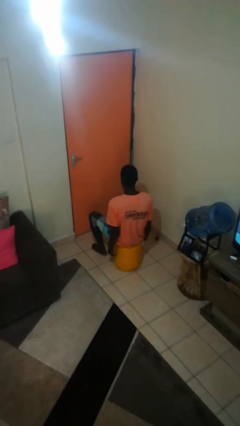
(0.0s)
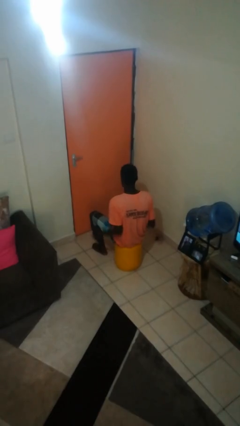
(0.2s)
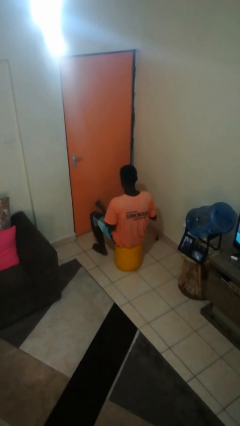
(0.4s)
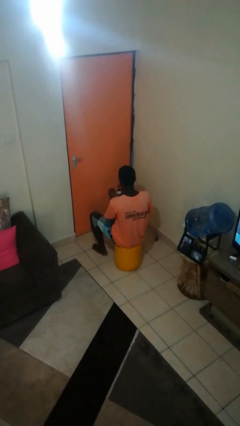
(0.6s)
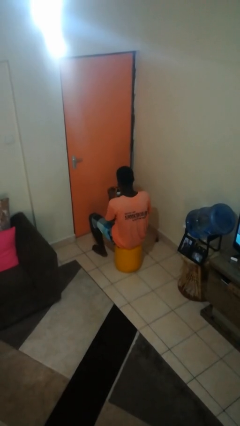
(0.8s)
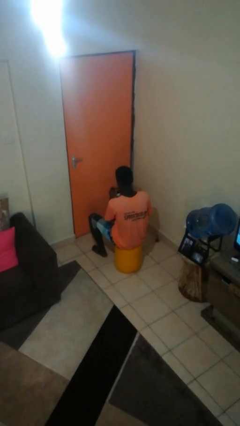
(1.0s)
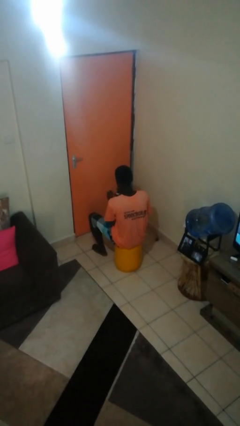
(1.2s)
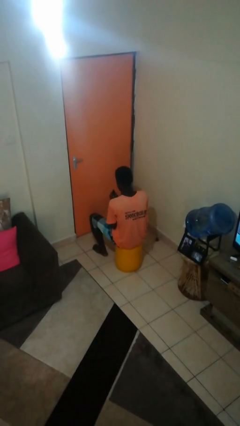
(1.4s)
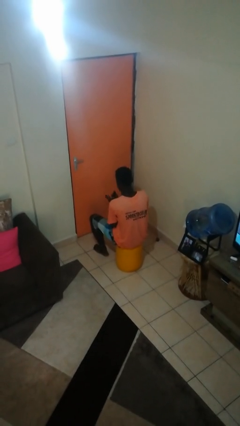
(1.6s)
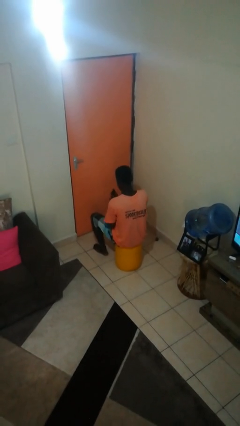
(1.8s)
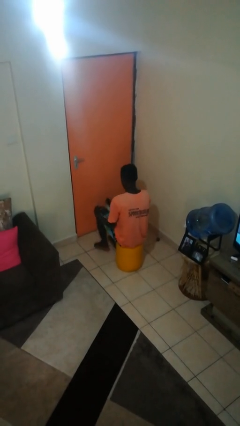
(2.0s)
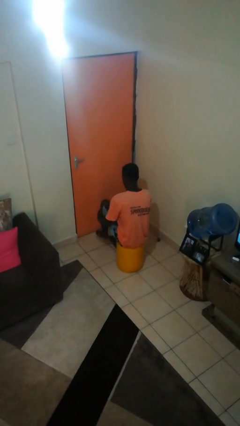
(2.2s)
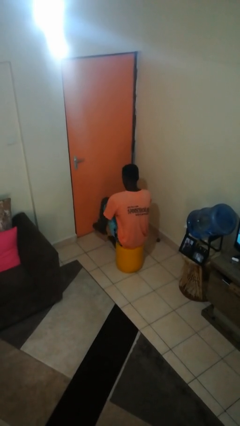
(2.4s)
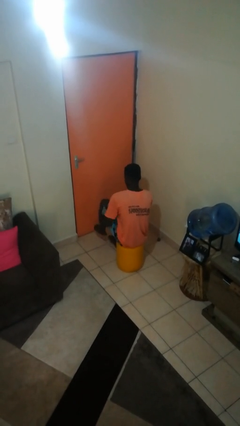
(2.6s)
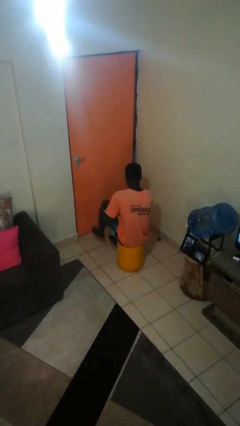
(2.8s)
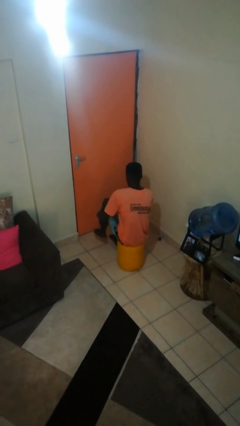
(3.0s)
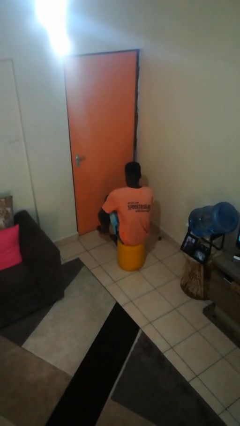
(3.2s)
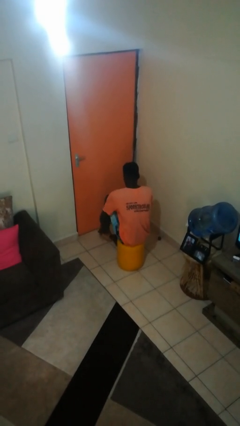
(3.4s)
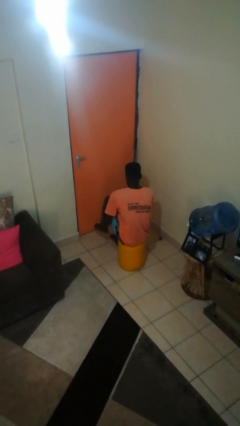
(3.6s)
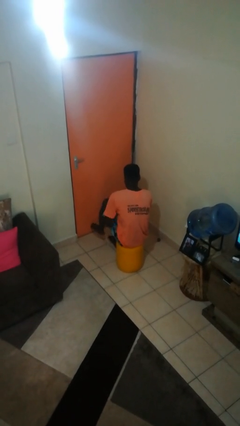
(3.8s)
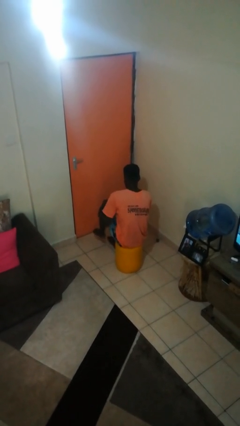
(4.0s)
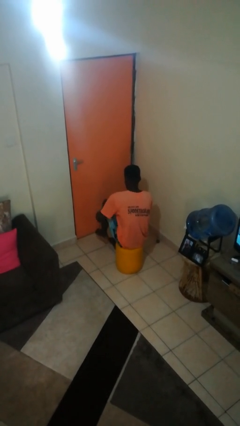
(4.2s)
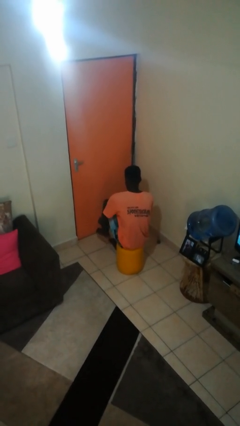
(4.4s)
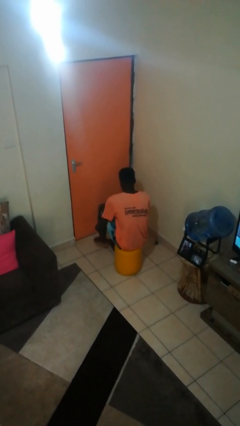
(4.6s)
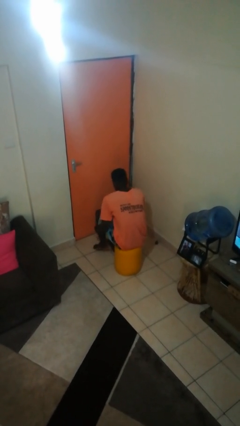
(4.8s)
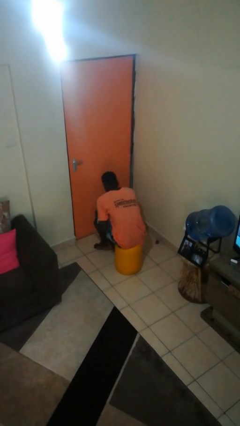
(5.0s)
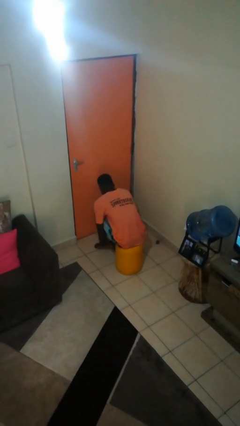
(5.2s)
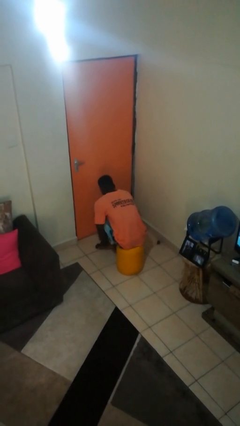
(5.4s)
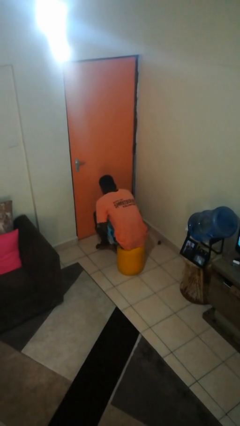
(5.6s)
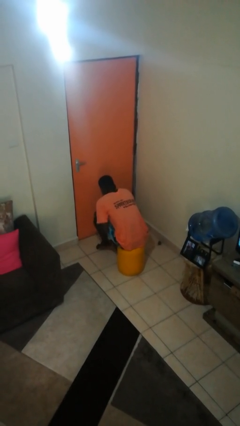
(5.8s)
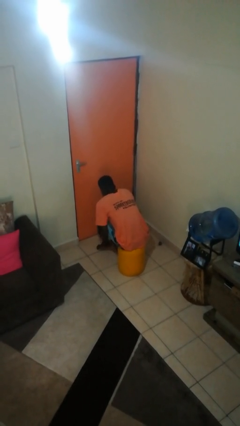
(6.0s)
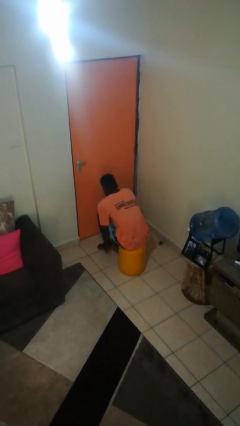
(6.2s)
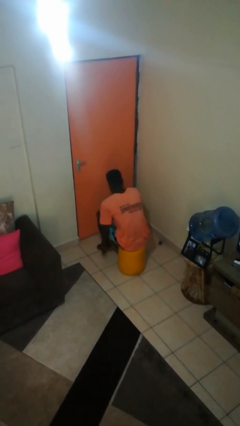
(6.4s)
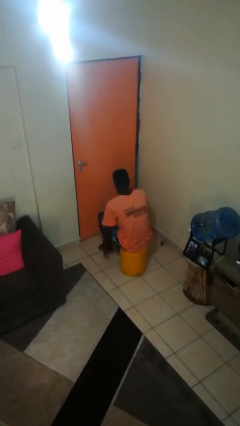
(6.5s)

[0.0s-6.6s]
person applies sunscreen

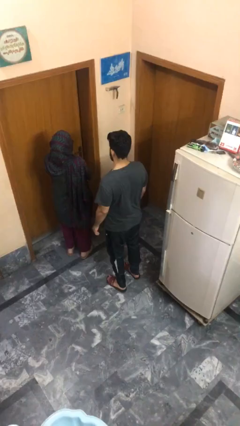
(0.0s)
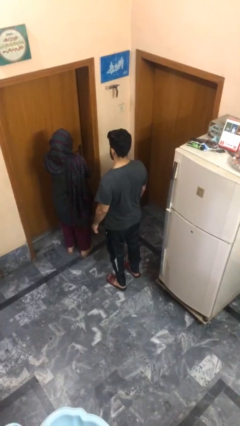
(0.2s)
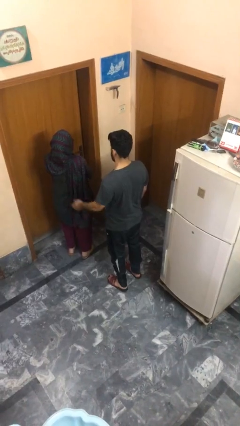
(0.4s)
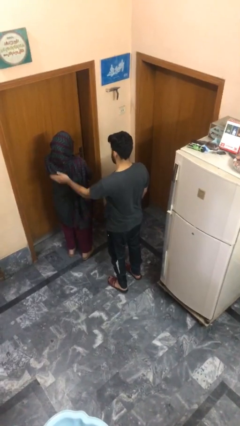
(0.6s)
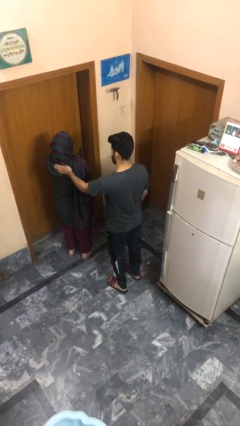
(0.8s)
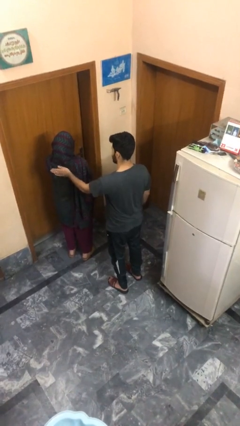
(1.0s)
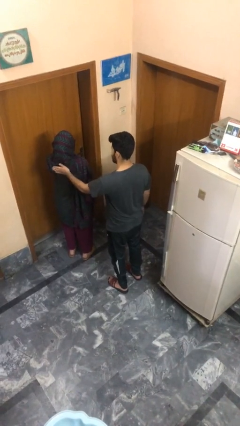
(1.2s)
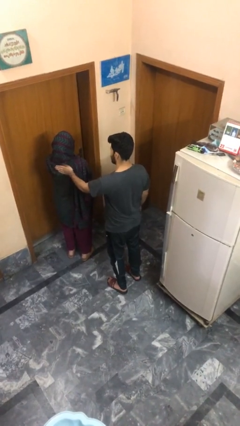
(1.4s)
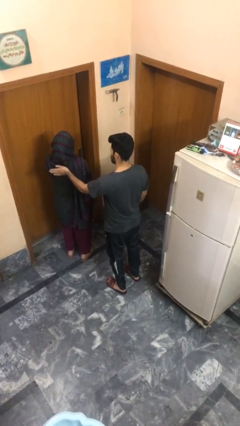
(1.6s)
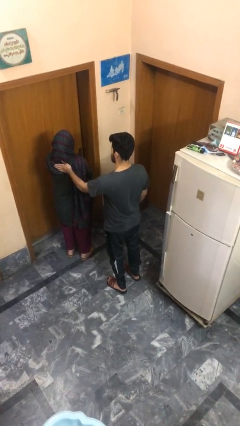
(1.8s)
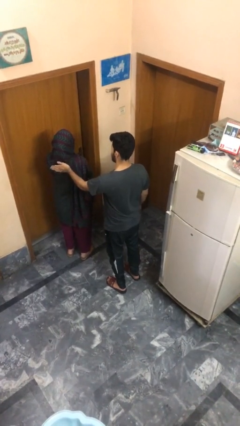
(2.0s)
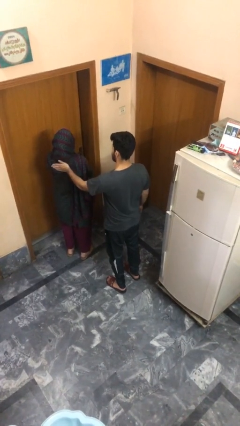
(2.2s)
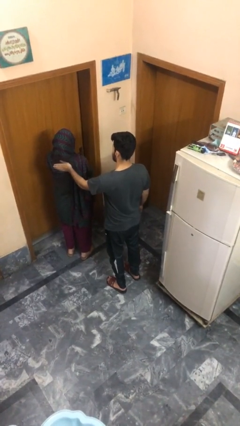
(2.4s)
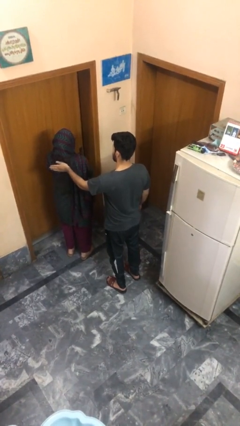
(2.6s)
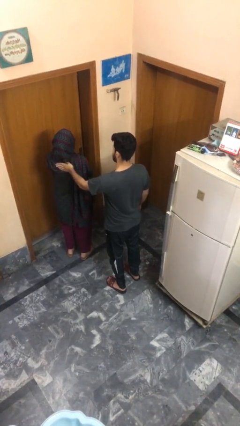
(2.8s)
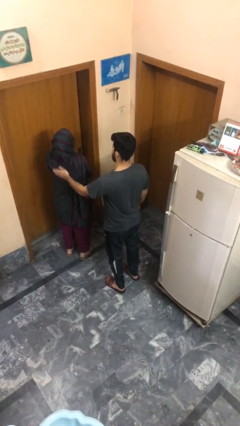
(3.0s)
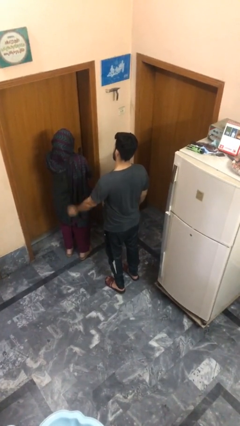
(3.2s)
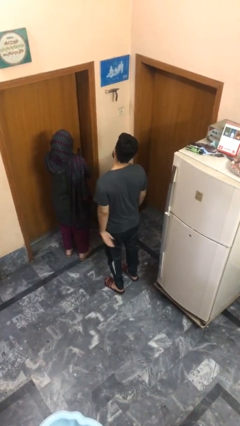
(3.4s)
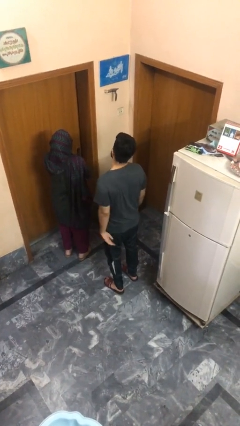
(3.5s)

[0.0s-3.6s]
person touches back of person

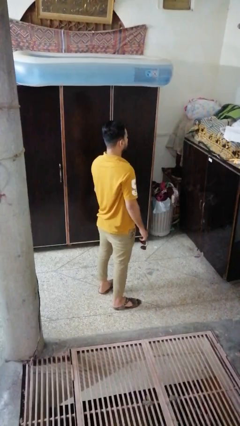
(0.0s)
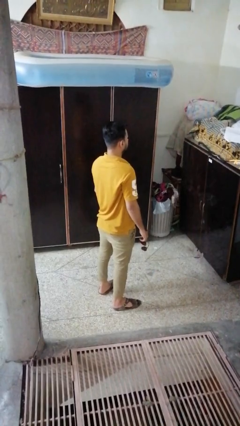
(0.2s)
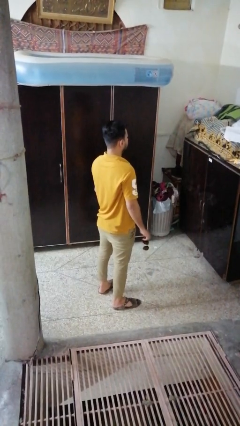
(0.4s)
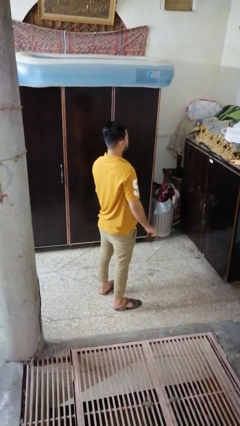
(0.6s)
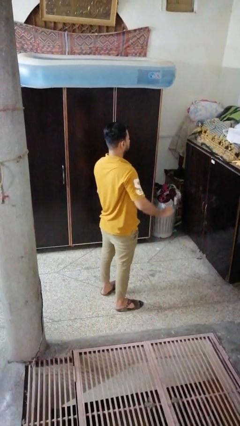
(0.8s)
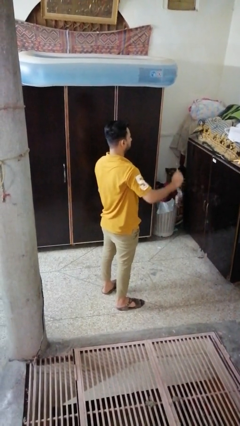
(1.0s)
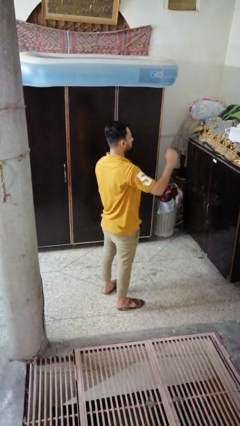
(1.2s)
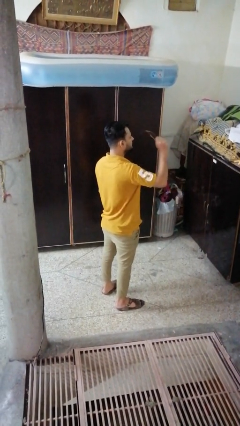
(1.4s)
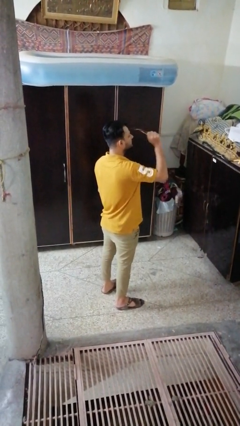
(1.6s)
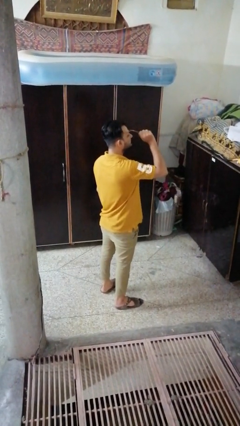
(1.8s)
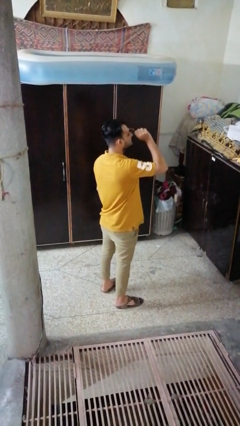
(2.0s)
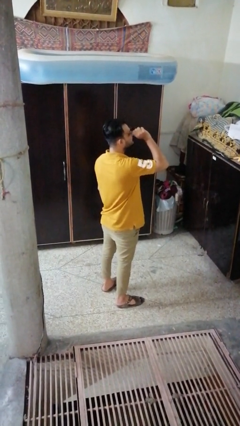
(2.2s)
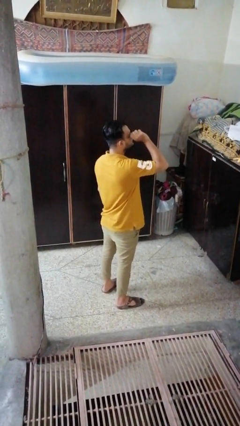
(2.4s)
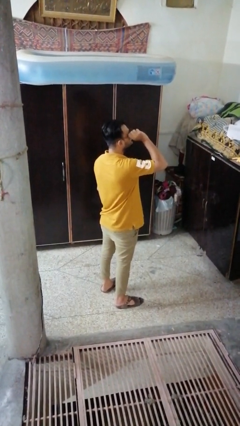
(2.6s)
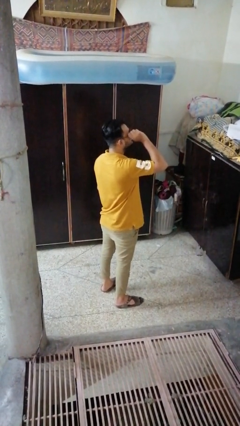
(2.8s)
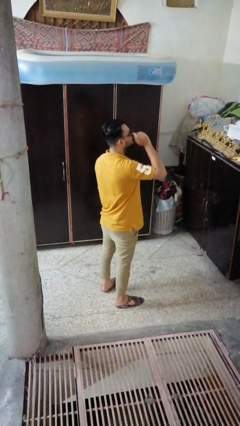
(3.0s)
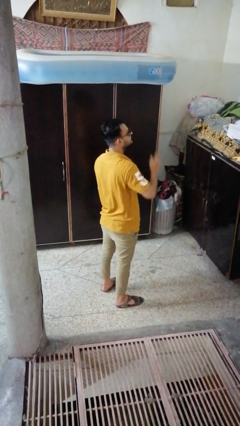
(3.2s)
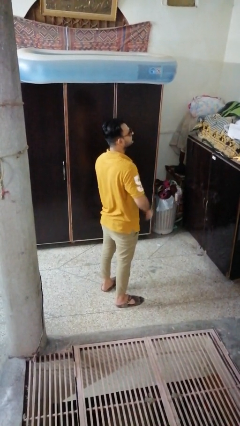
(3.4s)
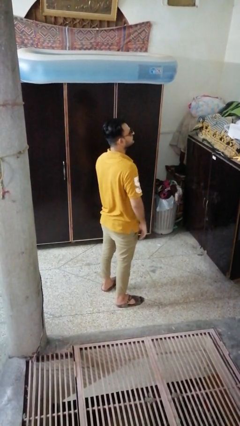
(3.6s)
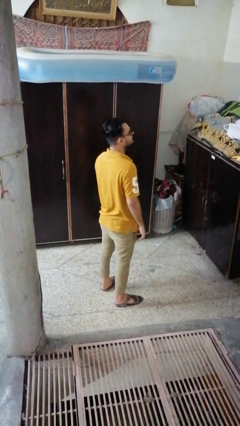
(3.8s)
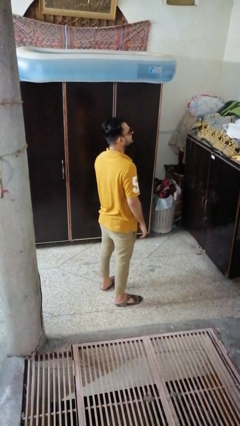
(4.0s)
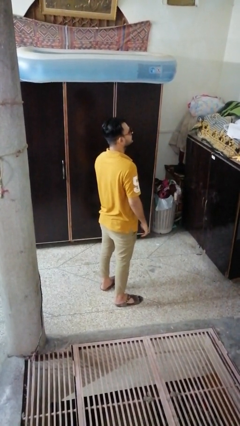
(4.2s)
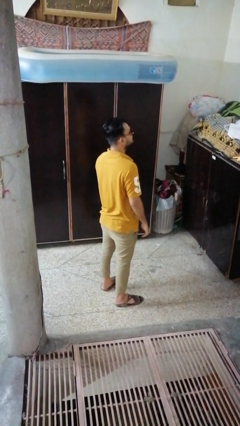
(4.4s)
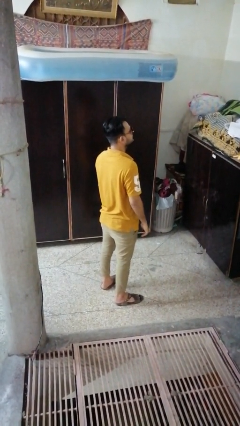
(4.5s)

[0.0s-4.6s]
person puts on sunglasses

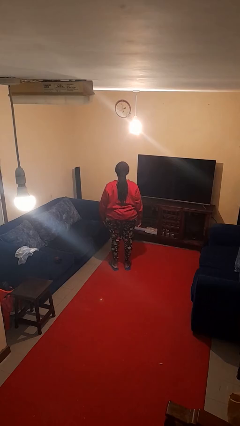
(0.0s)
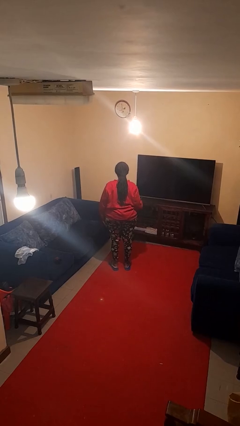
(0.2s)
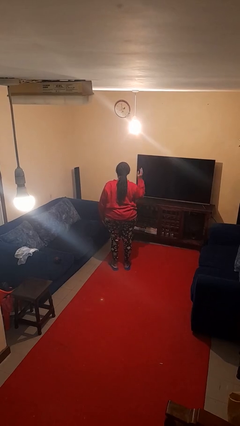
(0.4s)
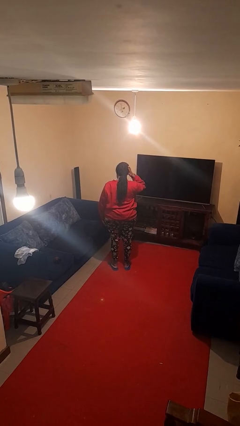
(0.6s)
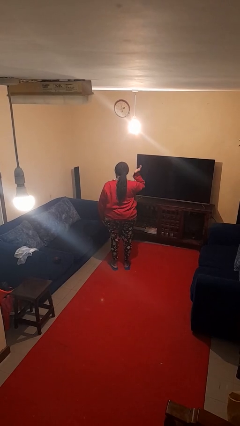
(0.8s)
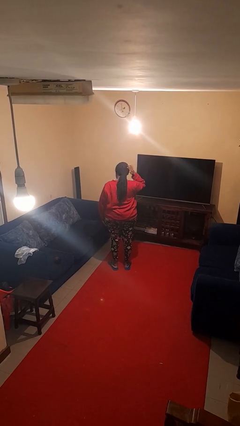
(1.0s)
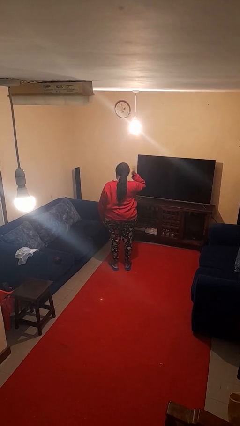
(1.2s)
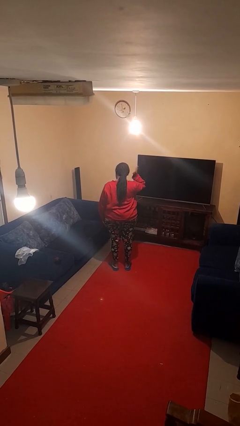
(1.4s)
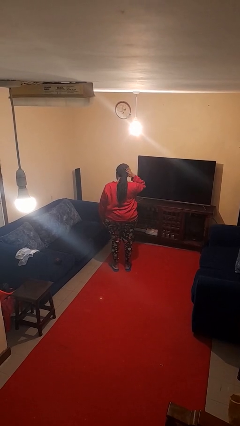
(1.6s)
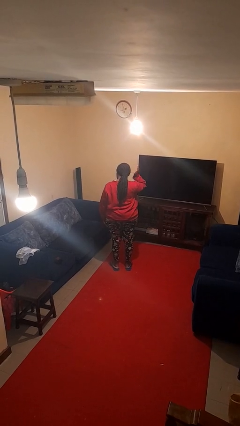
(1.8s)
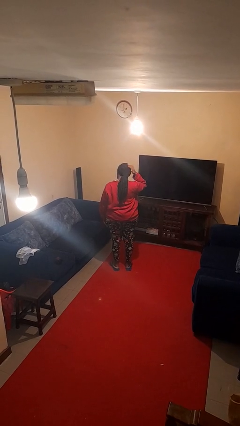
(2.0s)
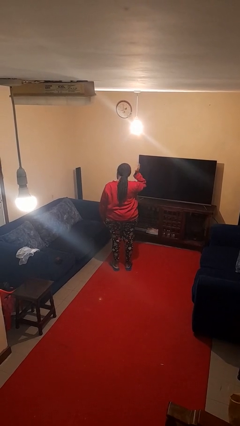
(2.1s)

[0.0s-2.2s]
person pats head

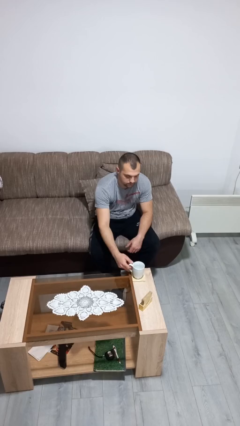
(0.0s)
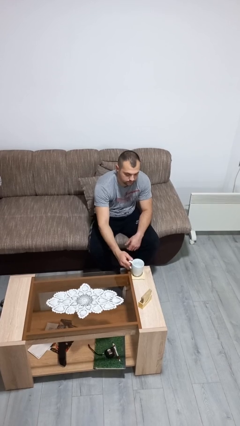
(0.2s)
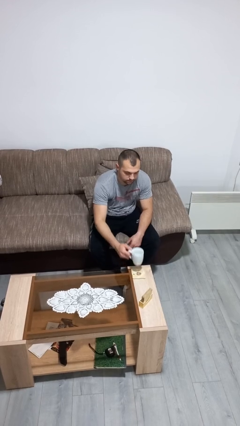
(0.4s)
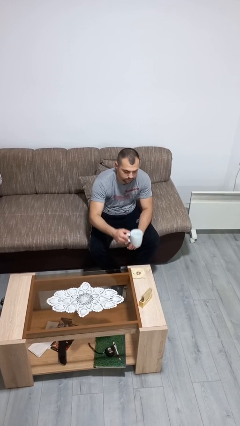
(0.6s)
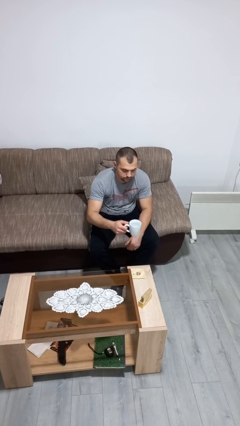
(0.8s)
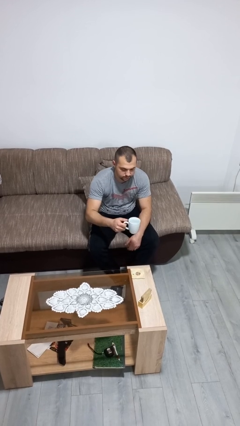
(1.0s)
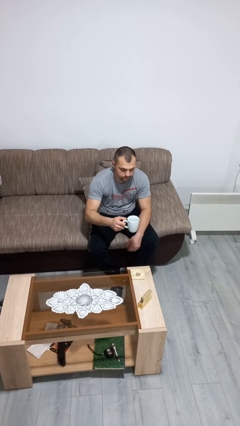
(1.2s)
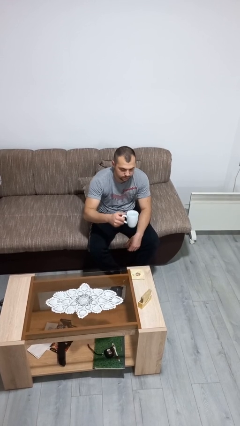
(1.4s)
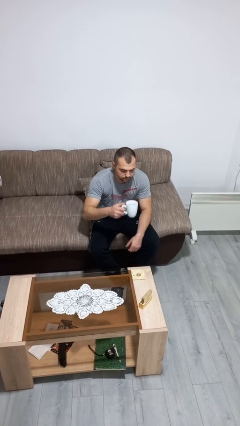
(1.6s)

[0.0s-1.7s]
person picks up object from table
